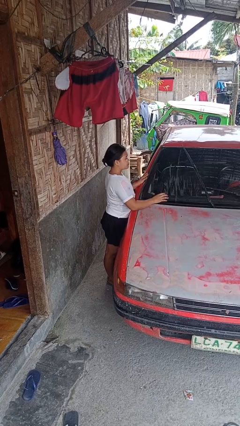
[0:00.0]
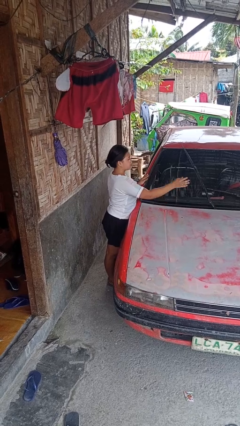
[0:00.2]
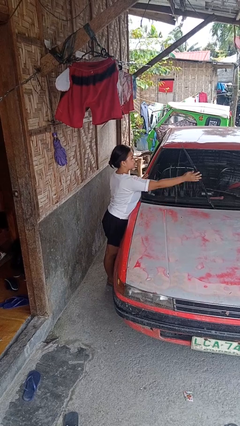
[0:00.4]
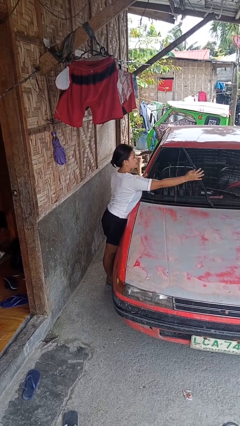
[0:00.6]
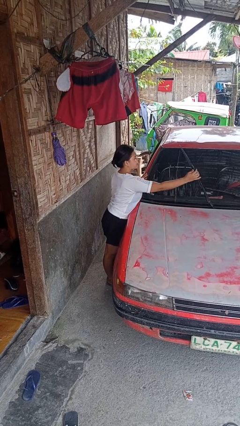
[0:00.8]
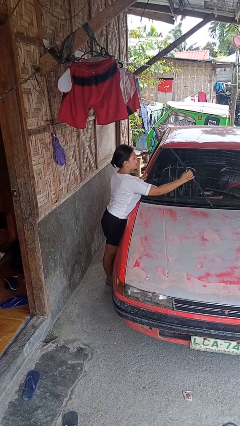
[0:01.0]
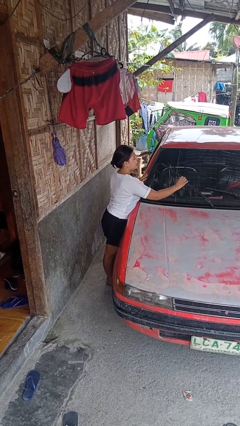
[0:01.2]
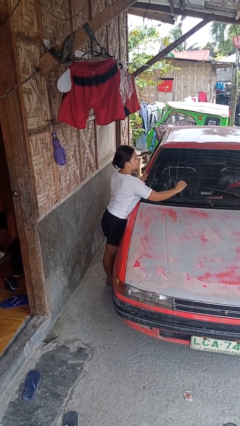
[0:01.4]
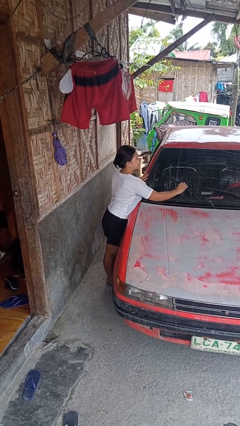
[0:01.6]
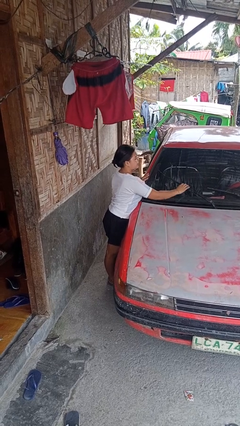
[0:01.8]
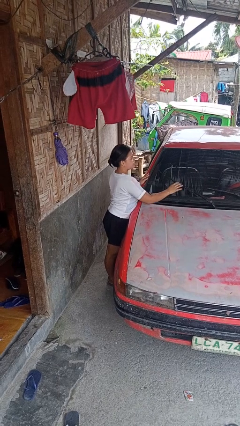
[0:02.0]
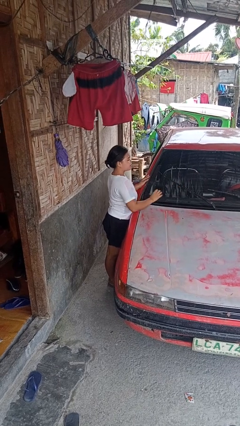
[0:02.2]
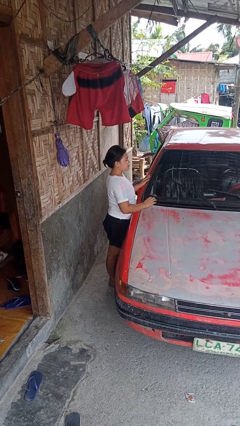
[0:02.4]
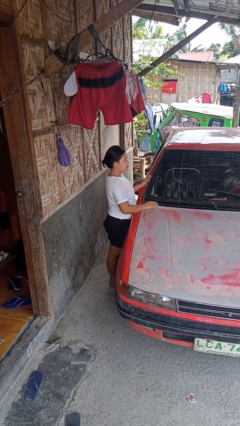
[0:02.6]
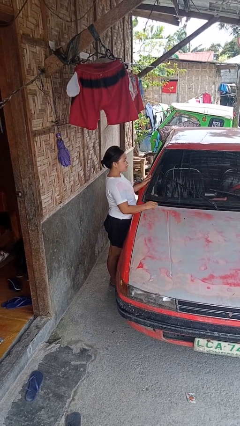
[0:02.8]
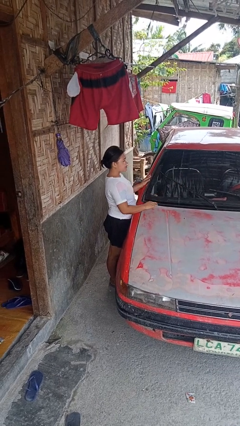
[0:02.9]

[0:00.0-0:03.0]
person flips down car wipers

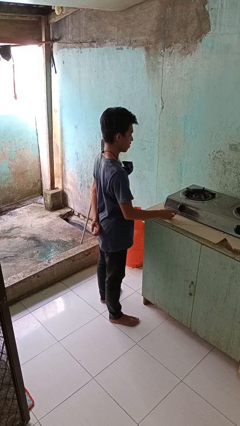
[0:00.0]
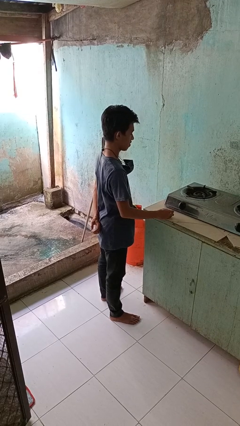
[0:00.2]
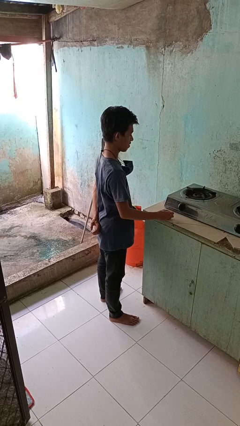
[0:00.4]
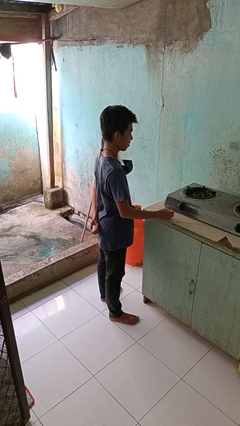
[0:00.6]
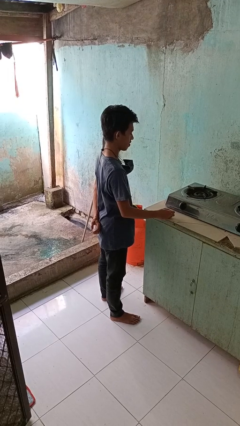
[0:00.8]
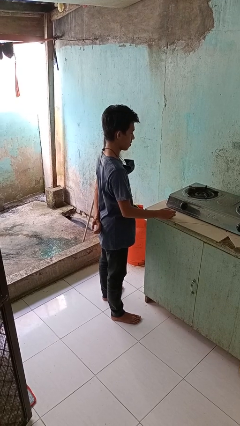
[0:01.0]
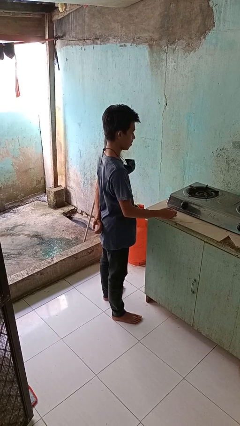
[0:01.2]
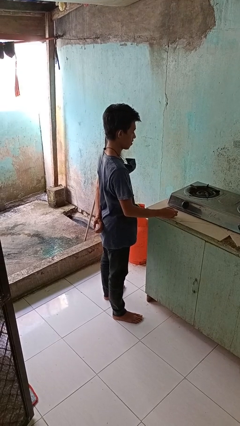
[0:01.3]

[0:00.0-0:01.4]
person turns off stovetop

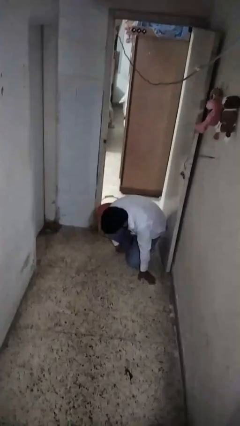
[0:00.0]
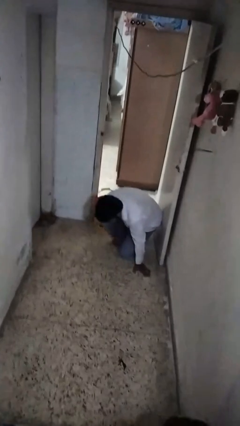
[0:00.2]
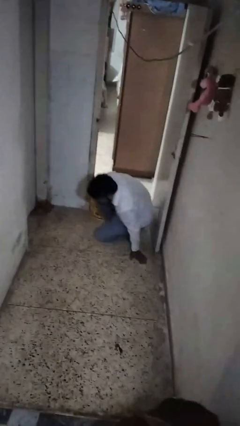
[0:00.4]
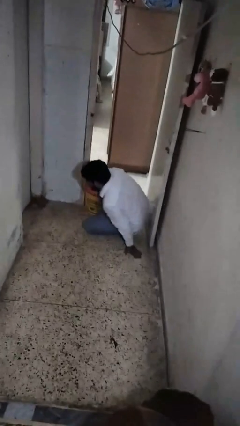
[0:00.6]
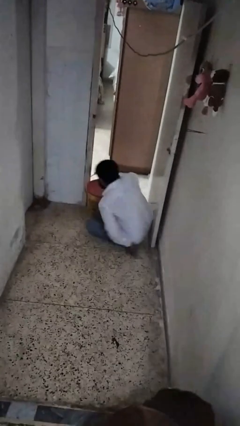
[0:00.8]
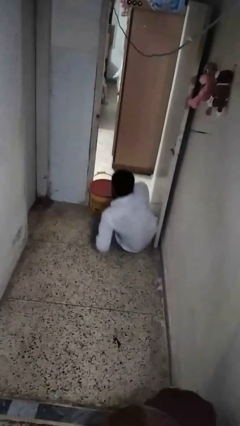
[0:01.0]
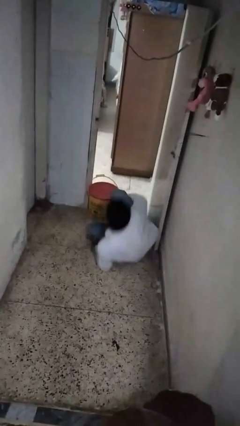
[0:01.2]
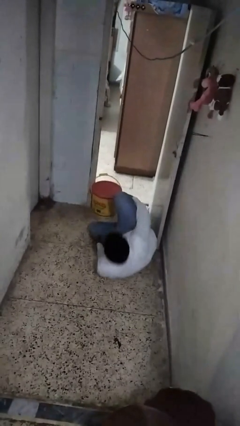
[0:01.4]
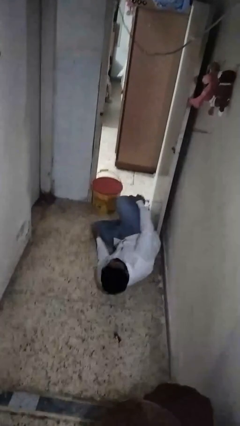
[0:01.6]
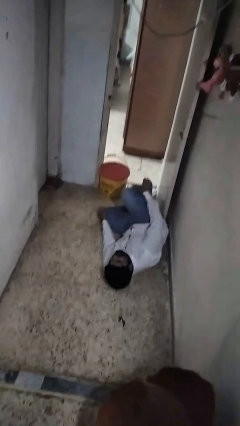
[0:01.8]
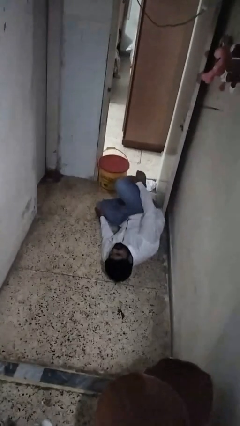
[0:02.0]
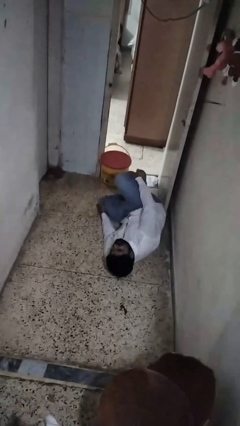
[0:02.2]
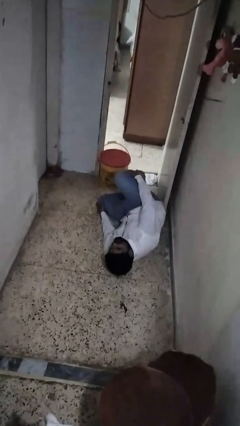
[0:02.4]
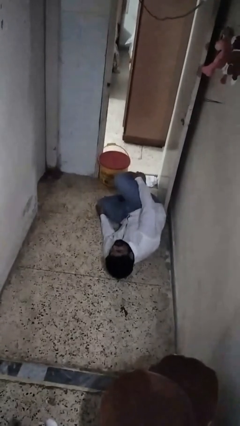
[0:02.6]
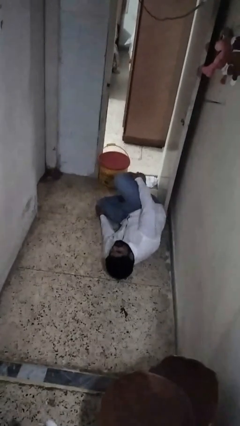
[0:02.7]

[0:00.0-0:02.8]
person lies down on floor

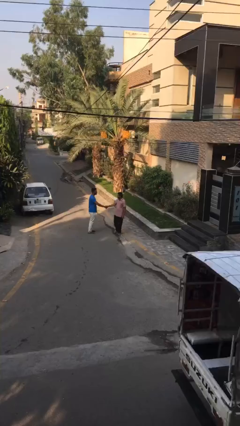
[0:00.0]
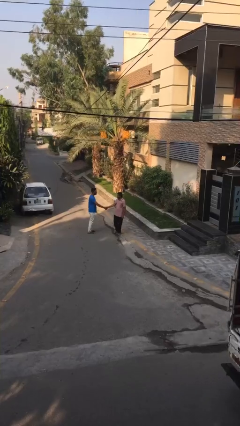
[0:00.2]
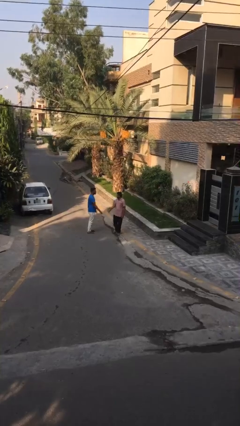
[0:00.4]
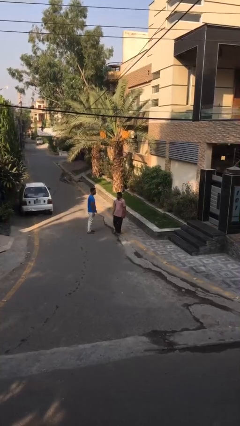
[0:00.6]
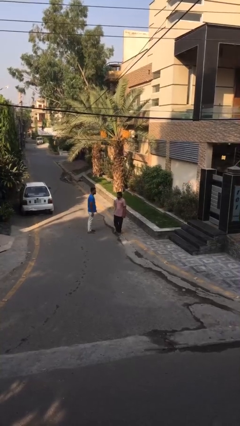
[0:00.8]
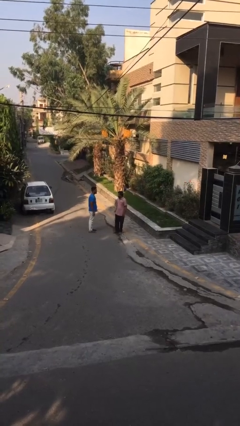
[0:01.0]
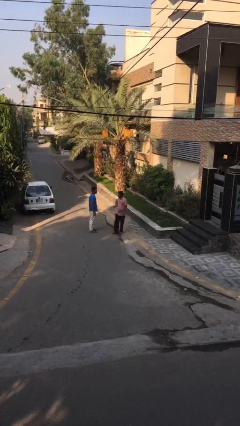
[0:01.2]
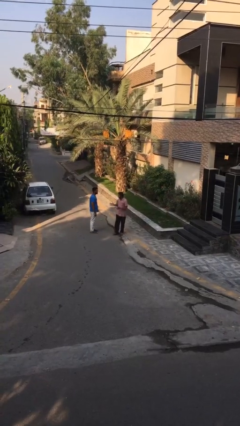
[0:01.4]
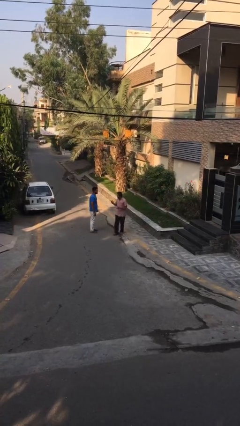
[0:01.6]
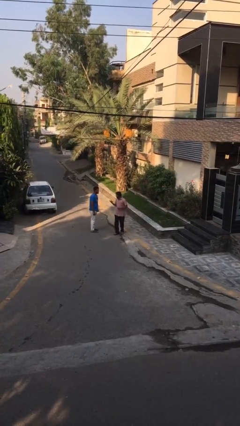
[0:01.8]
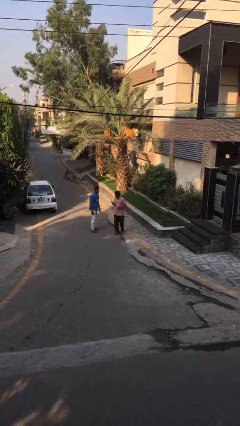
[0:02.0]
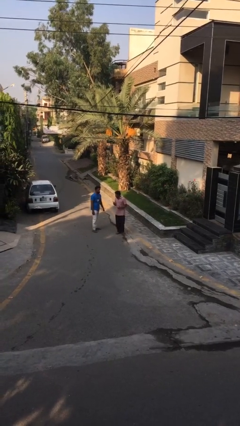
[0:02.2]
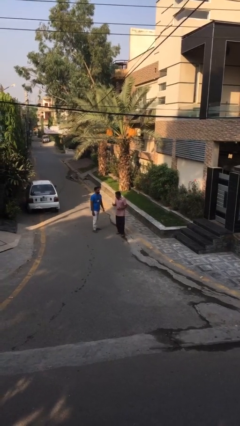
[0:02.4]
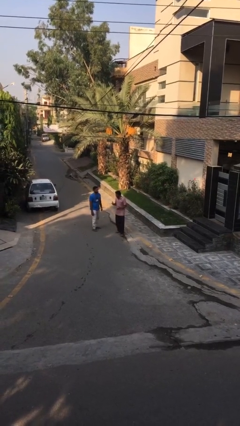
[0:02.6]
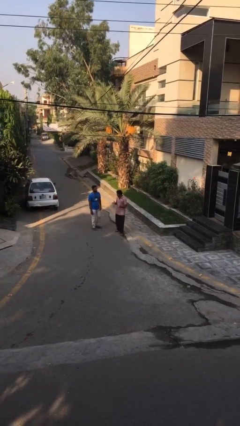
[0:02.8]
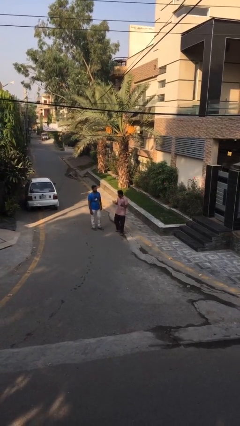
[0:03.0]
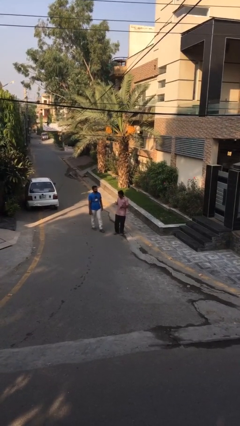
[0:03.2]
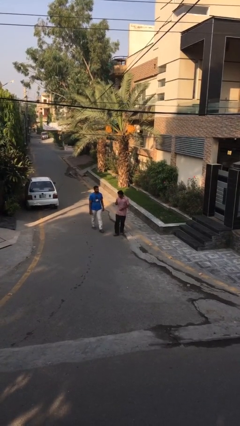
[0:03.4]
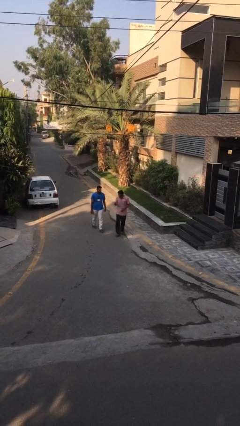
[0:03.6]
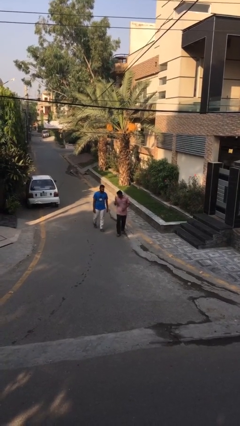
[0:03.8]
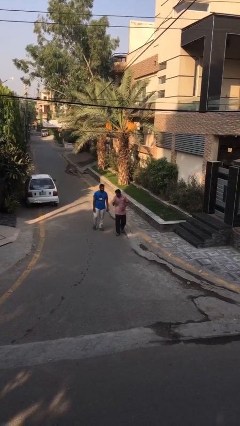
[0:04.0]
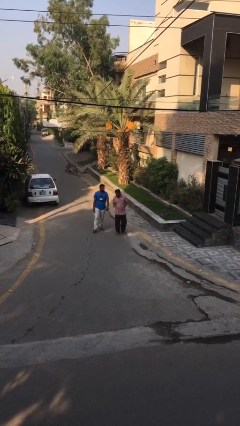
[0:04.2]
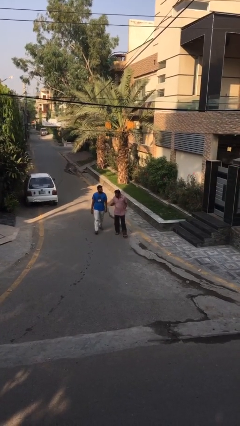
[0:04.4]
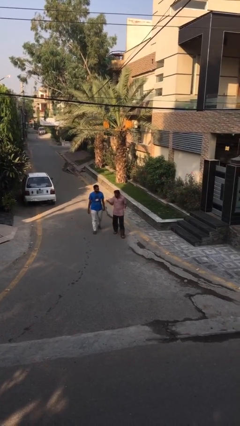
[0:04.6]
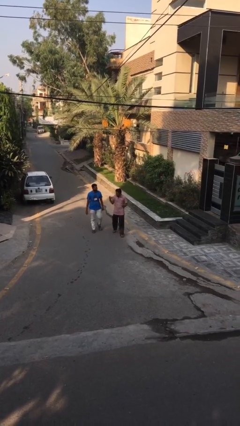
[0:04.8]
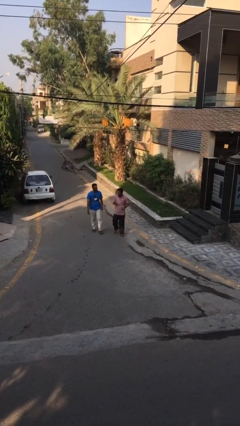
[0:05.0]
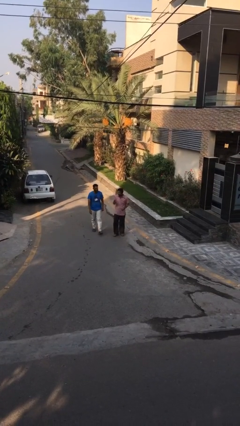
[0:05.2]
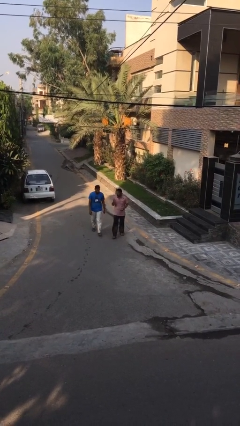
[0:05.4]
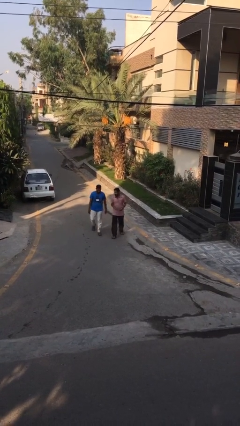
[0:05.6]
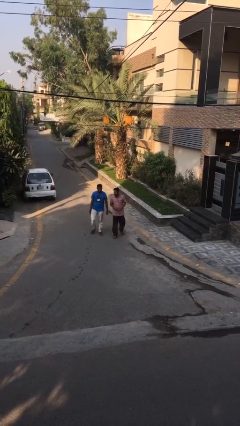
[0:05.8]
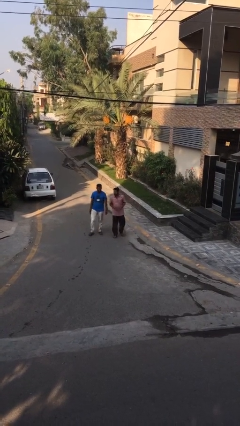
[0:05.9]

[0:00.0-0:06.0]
person talks to person

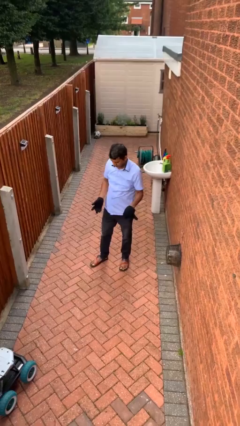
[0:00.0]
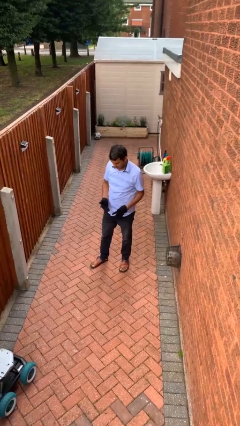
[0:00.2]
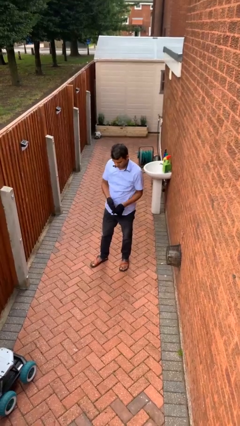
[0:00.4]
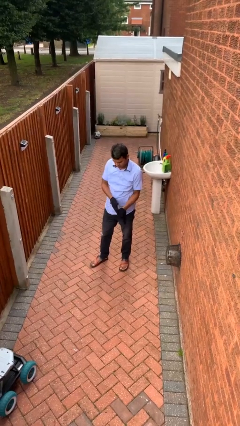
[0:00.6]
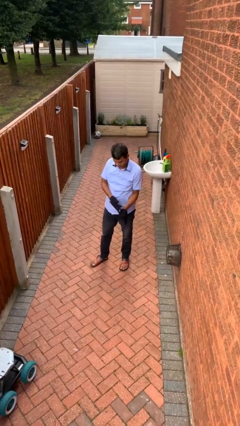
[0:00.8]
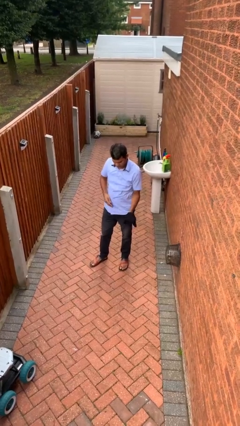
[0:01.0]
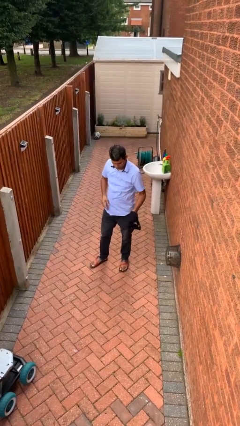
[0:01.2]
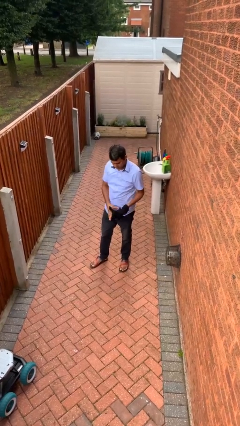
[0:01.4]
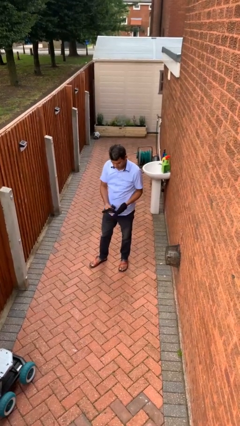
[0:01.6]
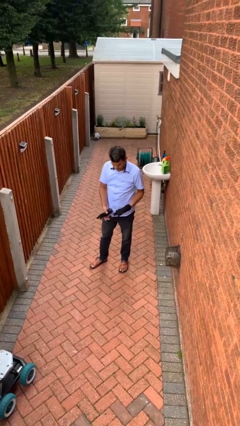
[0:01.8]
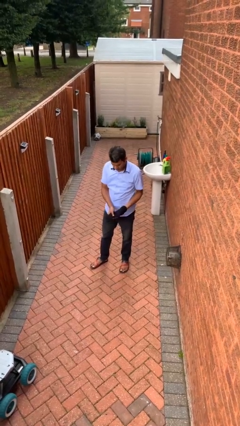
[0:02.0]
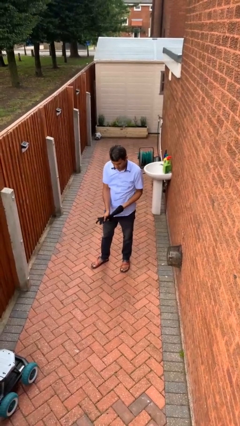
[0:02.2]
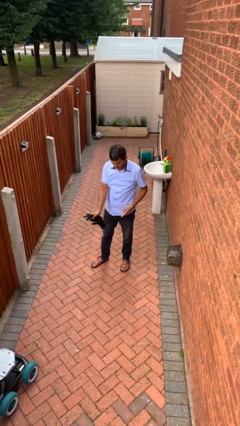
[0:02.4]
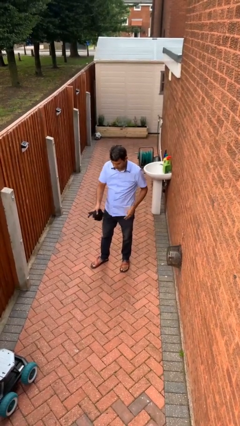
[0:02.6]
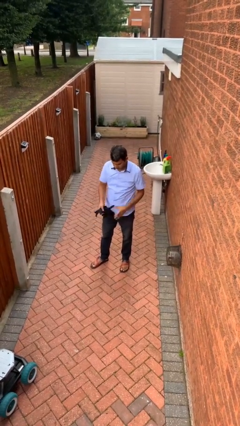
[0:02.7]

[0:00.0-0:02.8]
person takes off gloves

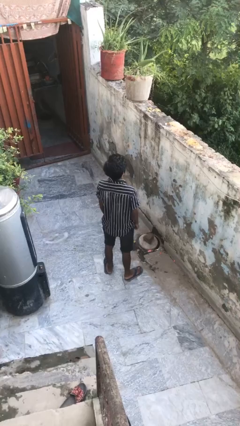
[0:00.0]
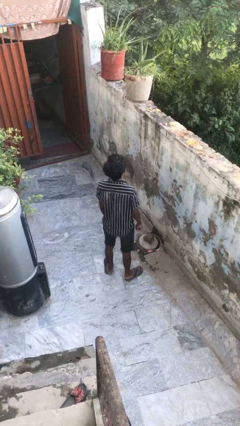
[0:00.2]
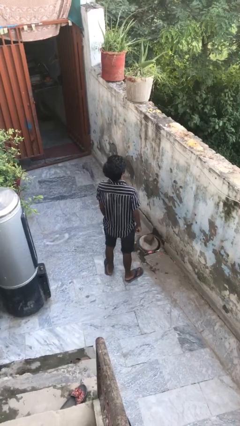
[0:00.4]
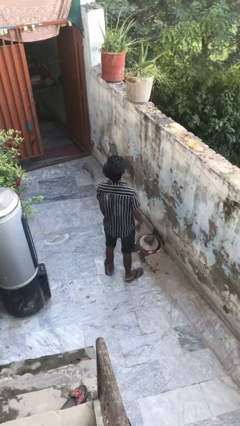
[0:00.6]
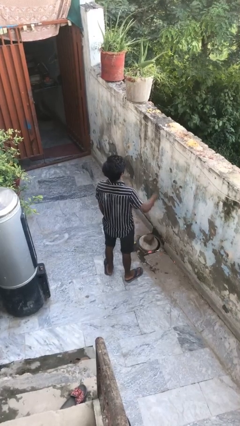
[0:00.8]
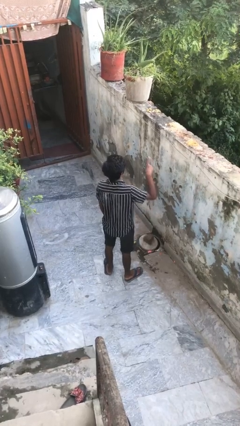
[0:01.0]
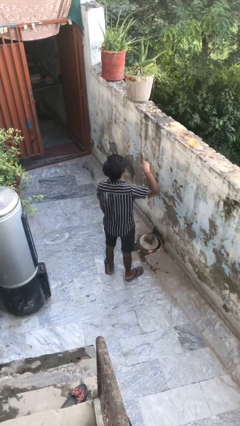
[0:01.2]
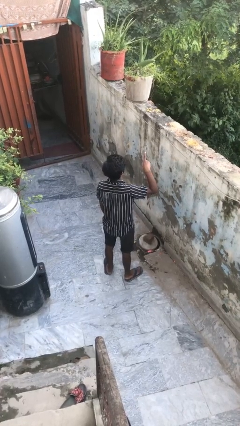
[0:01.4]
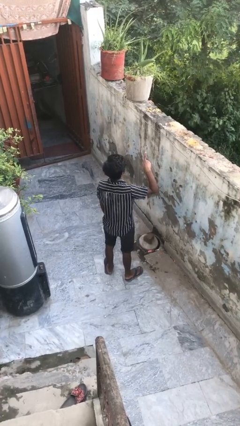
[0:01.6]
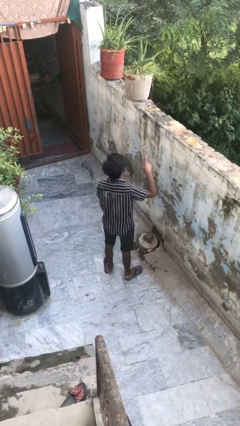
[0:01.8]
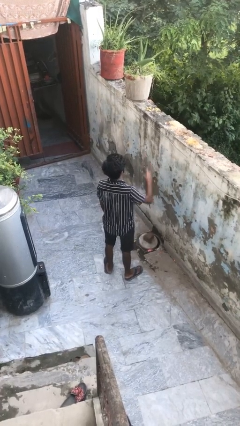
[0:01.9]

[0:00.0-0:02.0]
person gestures number one
